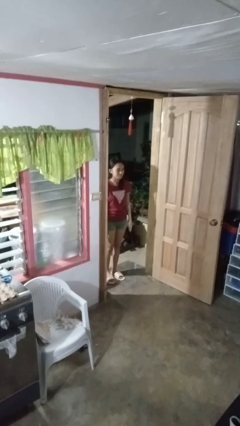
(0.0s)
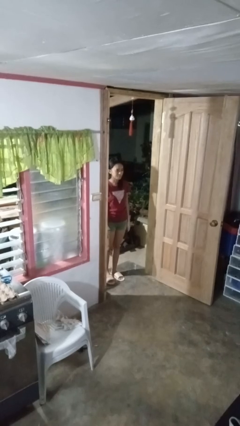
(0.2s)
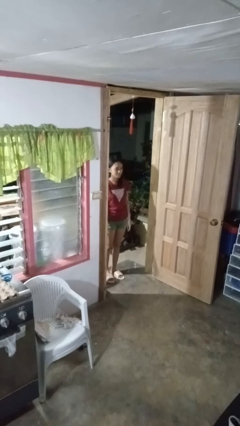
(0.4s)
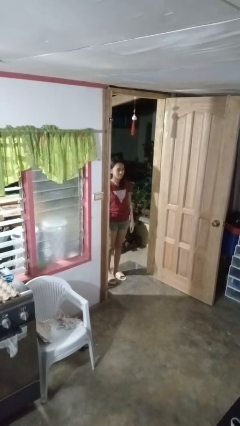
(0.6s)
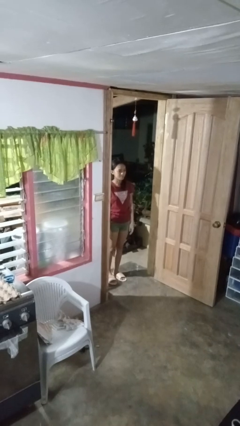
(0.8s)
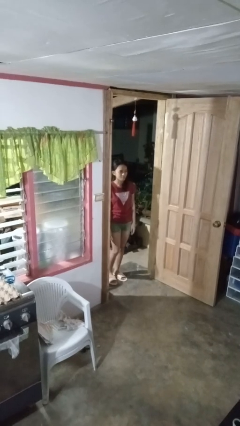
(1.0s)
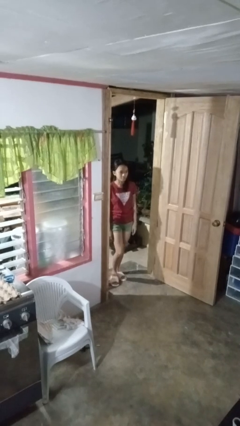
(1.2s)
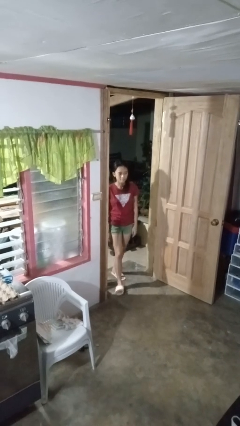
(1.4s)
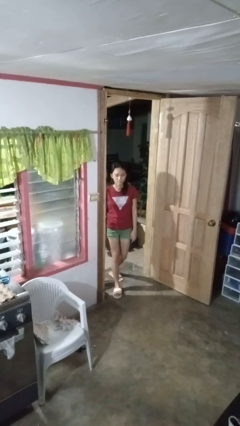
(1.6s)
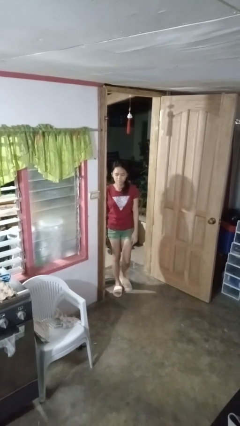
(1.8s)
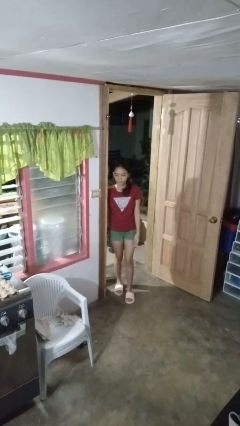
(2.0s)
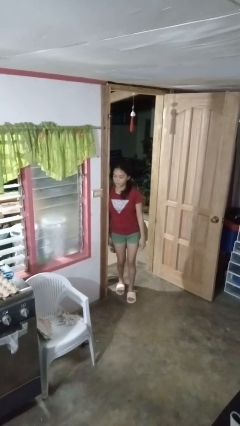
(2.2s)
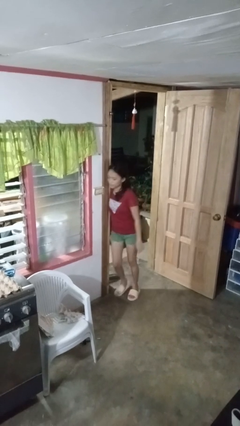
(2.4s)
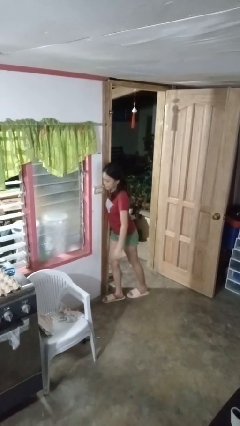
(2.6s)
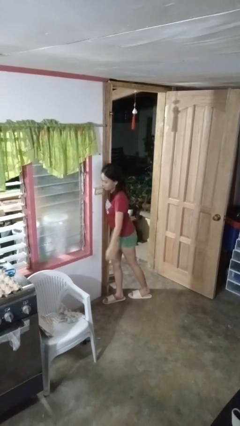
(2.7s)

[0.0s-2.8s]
person bumps into wall

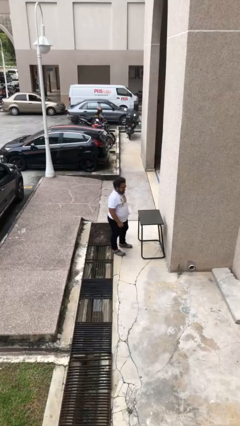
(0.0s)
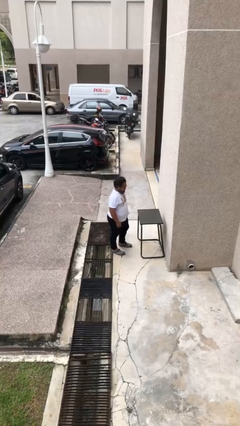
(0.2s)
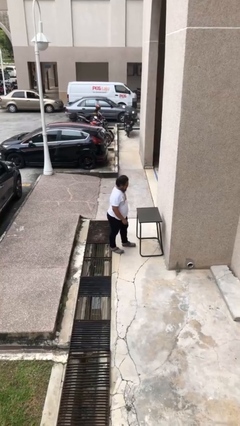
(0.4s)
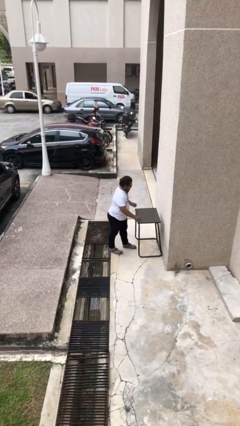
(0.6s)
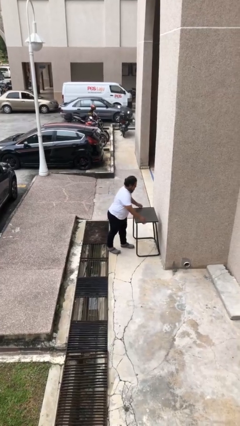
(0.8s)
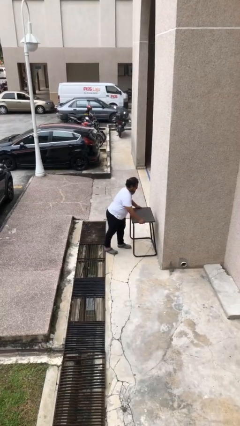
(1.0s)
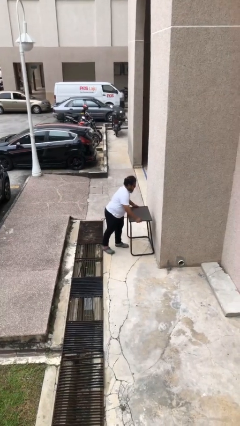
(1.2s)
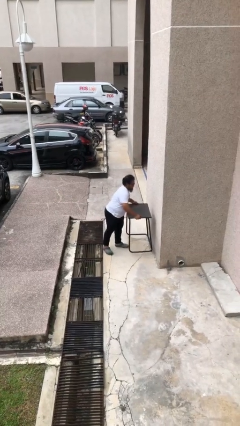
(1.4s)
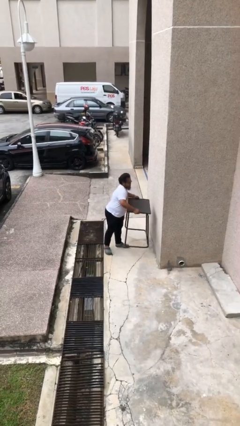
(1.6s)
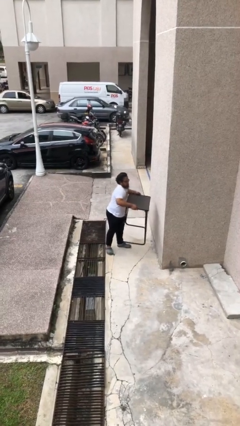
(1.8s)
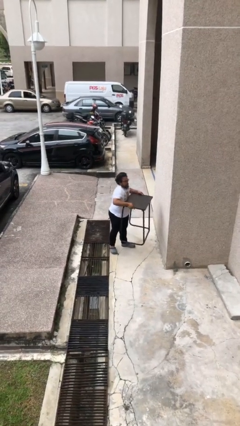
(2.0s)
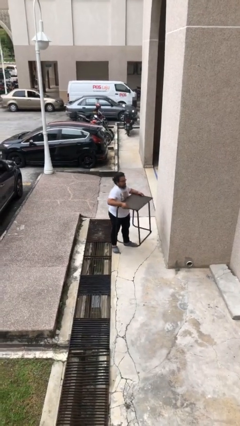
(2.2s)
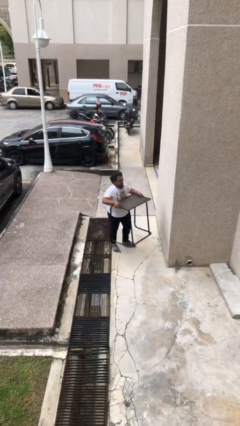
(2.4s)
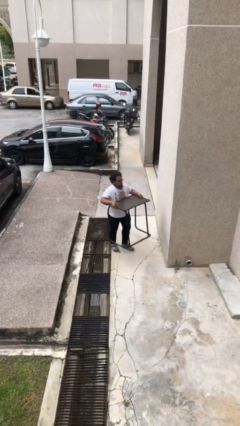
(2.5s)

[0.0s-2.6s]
person picks up object from floor

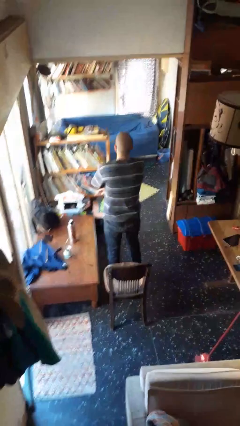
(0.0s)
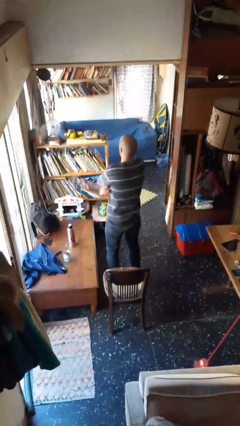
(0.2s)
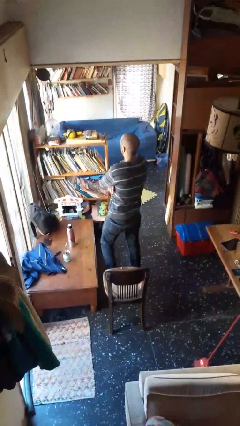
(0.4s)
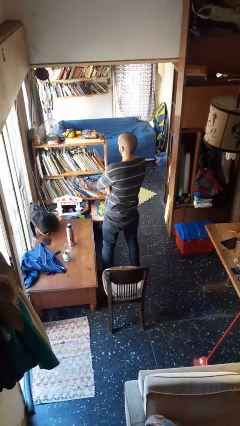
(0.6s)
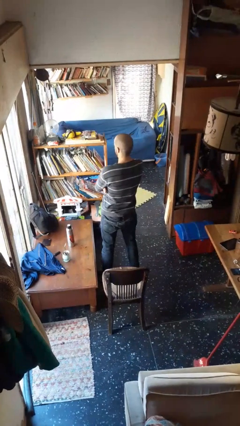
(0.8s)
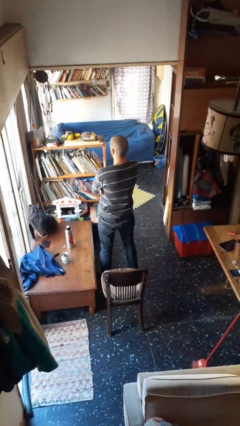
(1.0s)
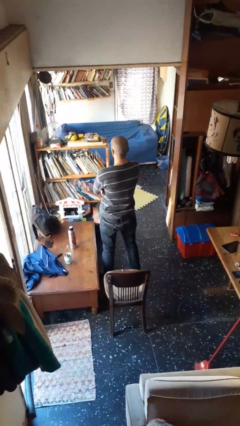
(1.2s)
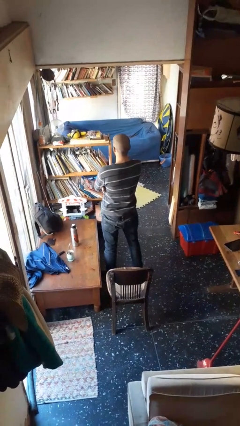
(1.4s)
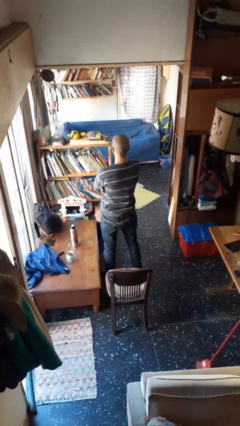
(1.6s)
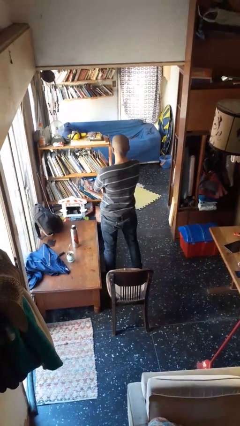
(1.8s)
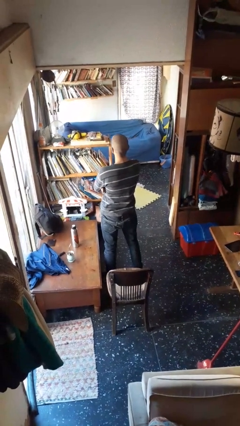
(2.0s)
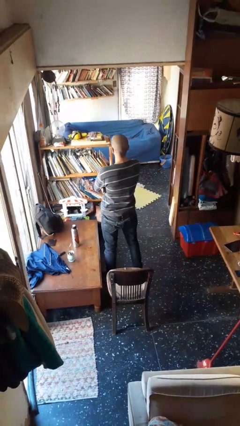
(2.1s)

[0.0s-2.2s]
person crosses arms

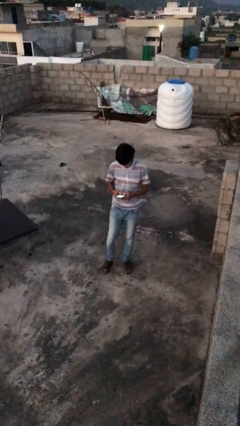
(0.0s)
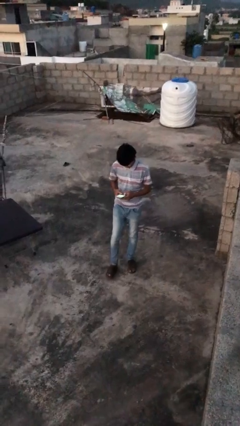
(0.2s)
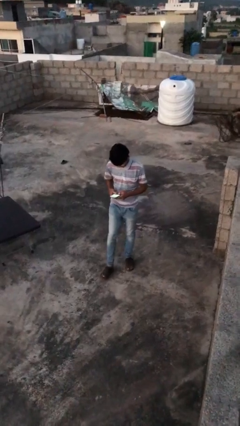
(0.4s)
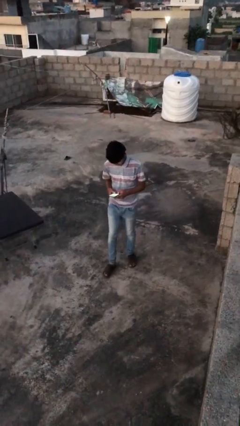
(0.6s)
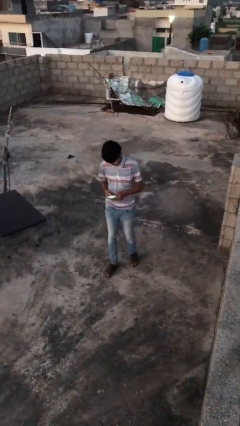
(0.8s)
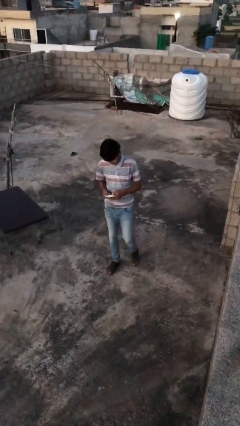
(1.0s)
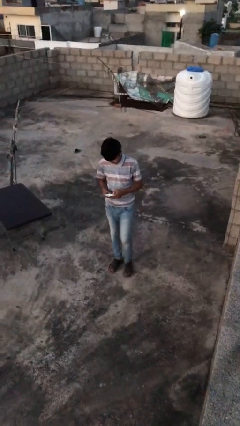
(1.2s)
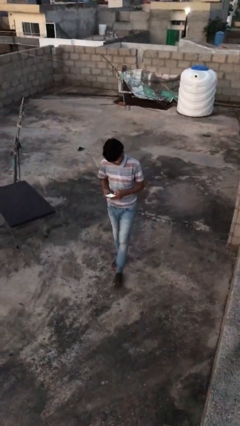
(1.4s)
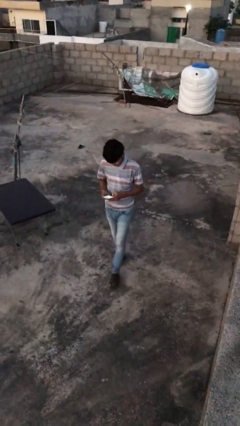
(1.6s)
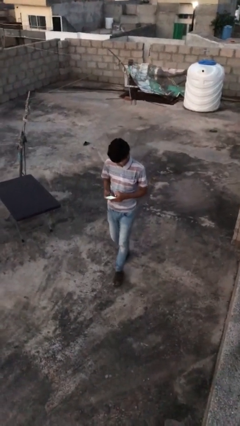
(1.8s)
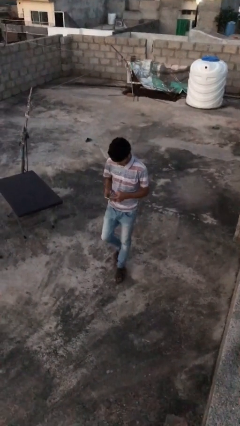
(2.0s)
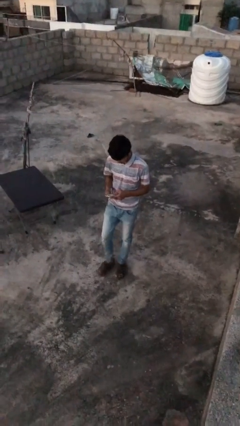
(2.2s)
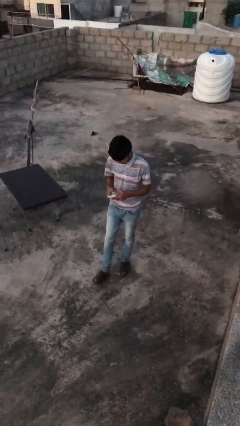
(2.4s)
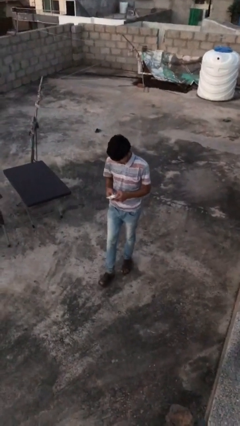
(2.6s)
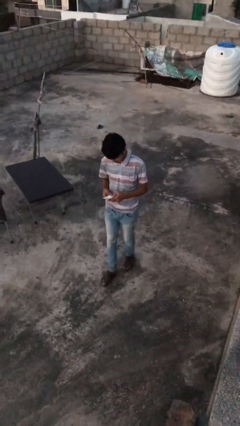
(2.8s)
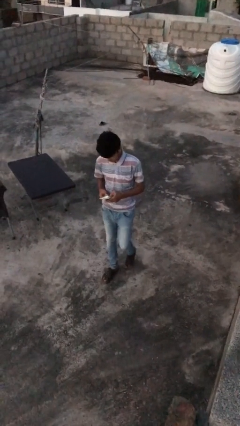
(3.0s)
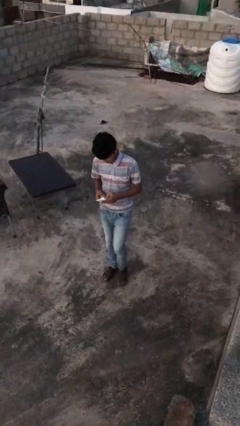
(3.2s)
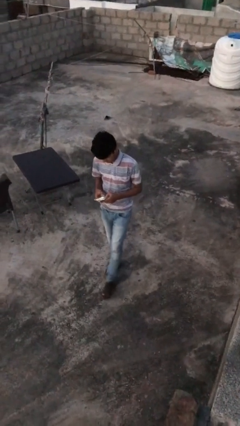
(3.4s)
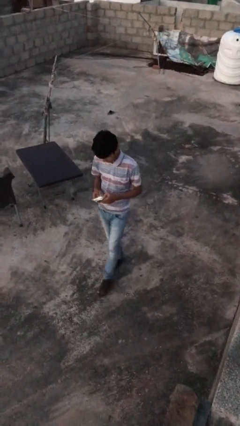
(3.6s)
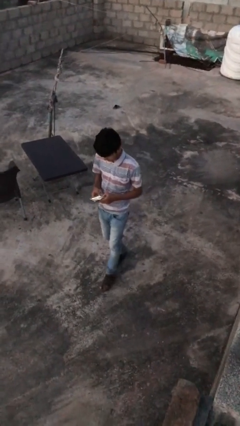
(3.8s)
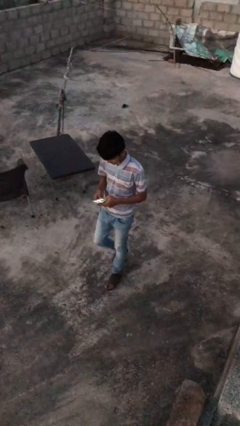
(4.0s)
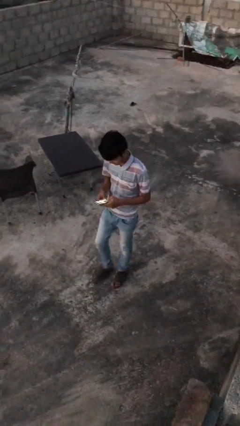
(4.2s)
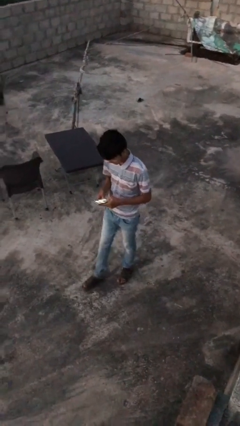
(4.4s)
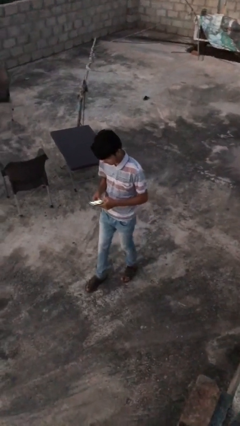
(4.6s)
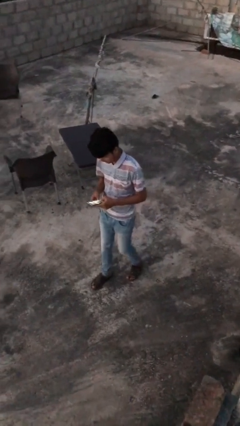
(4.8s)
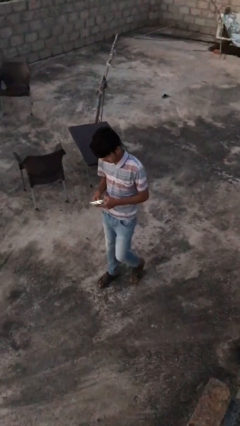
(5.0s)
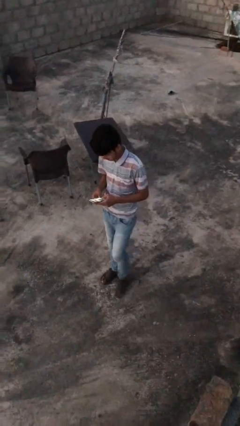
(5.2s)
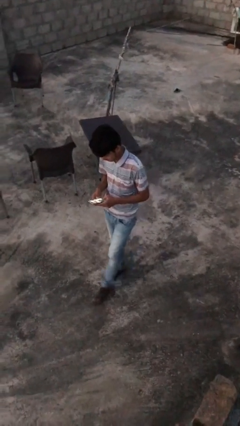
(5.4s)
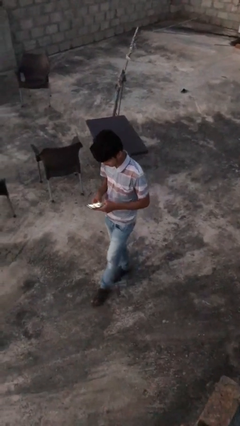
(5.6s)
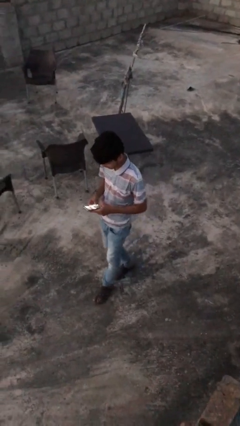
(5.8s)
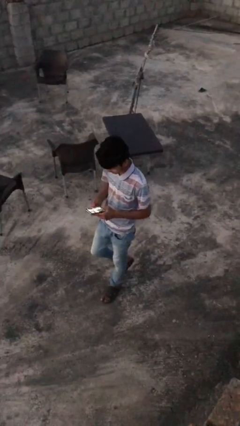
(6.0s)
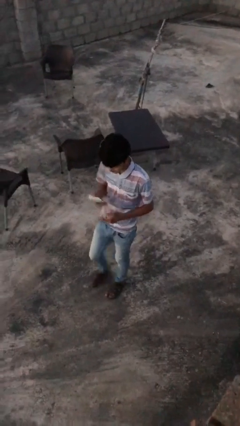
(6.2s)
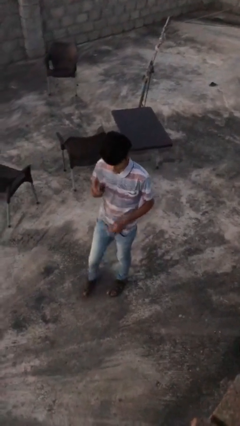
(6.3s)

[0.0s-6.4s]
person texts on phone

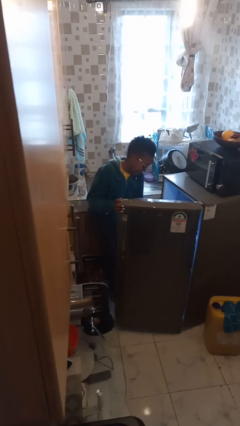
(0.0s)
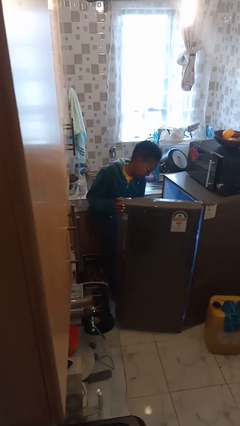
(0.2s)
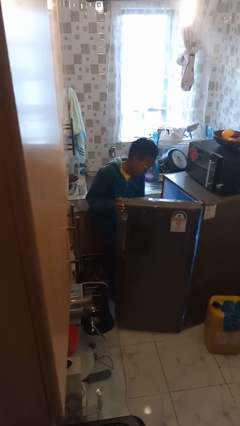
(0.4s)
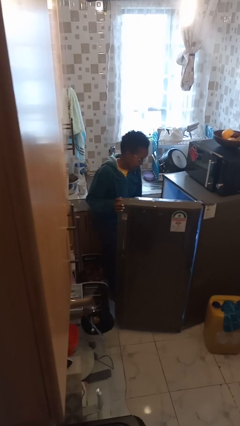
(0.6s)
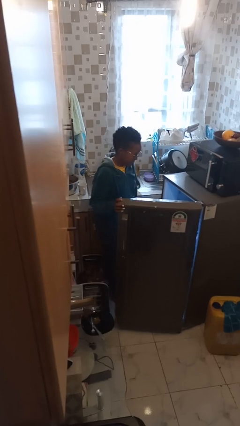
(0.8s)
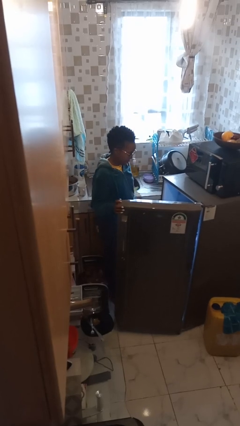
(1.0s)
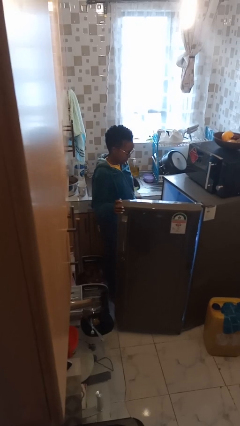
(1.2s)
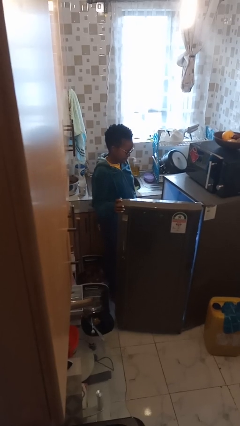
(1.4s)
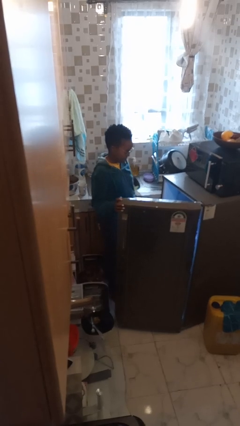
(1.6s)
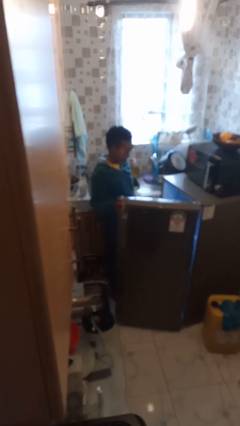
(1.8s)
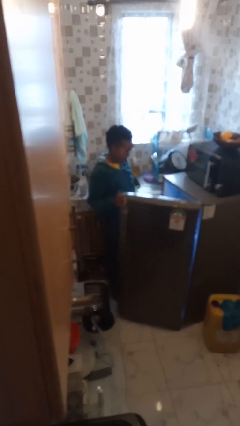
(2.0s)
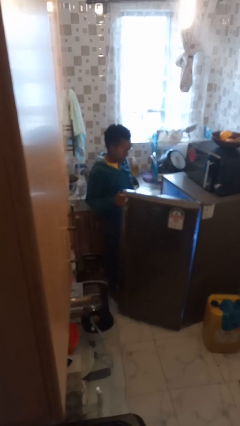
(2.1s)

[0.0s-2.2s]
person puts object into refrigerator

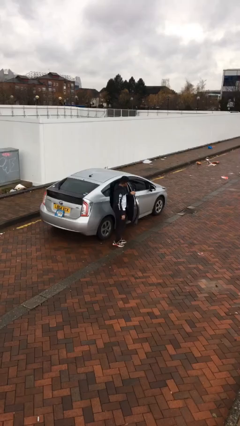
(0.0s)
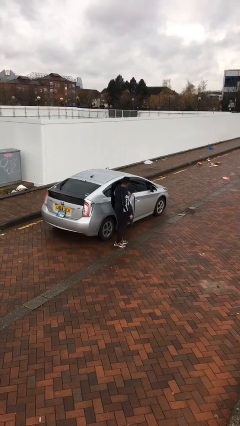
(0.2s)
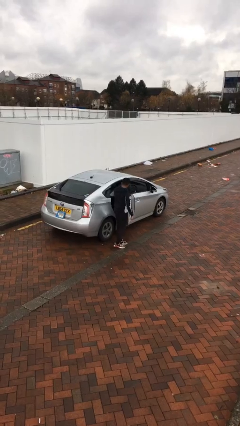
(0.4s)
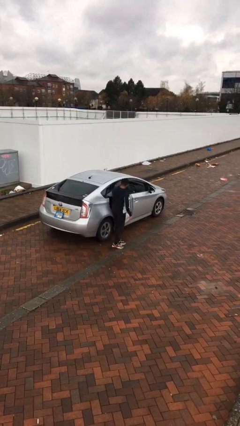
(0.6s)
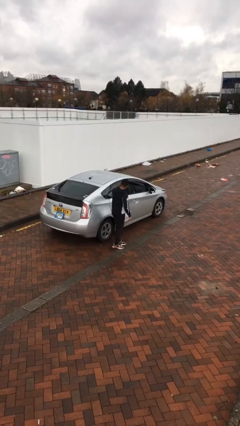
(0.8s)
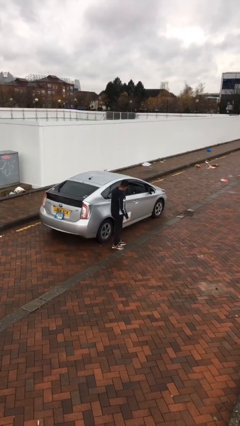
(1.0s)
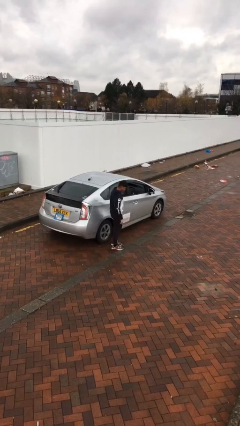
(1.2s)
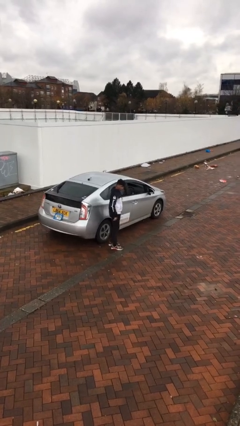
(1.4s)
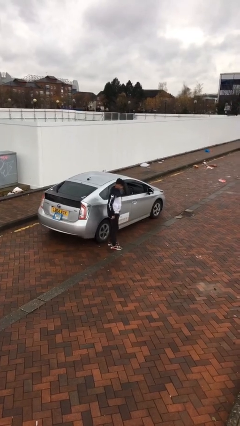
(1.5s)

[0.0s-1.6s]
person closes car door
